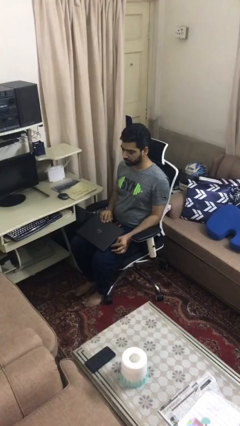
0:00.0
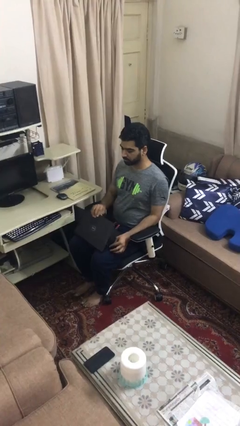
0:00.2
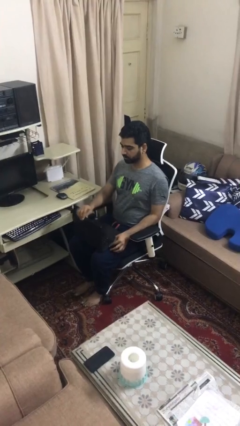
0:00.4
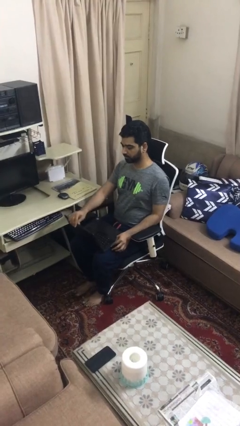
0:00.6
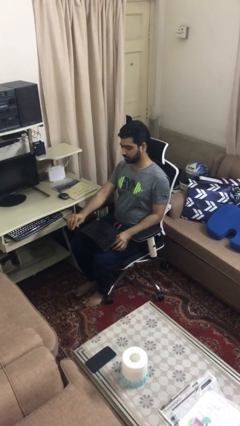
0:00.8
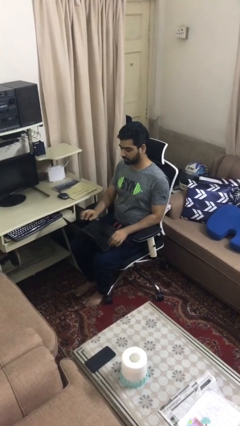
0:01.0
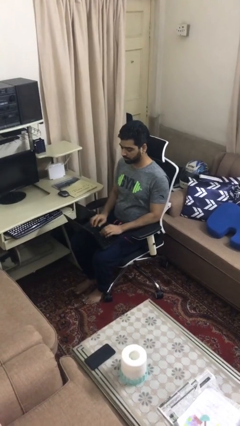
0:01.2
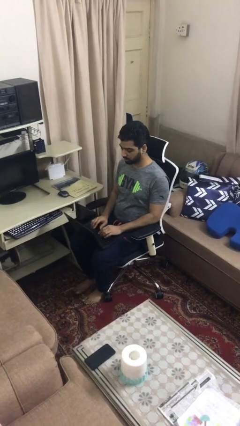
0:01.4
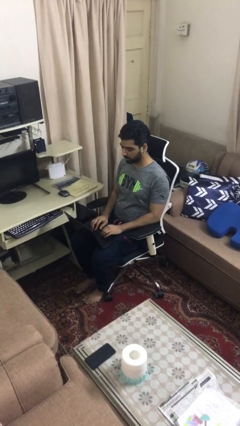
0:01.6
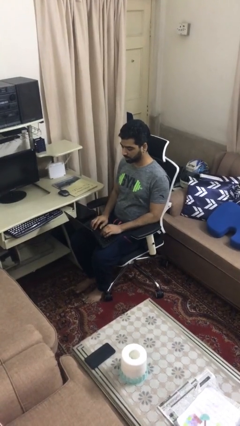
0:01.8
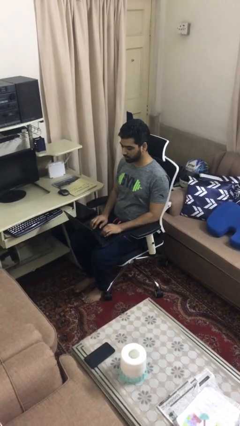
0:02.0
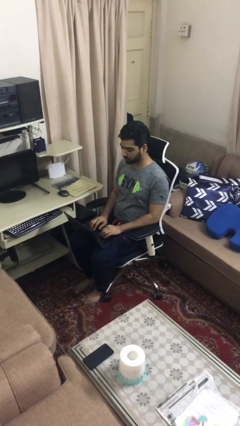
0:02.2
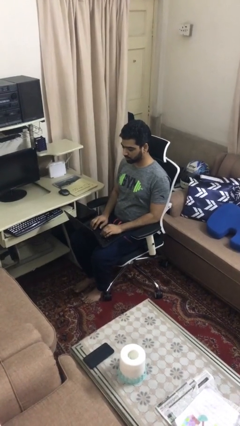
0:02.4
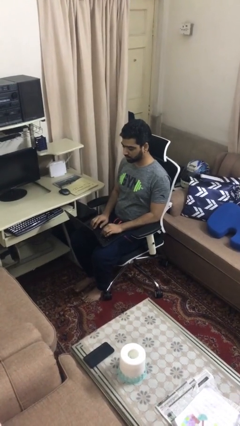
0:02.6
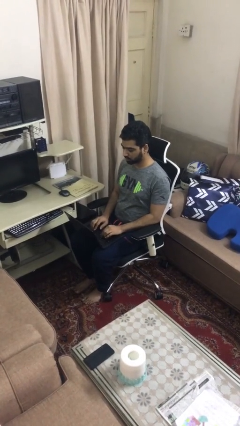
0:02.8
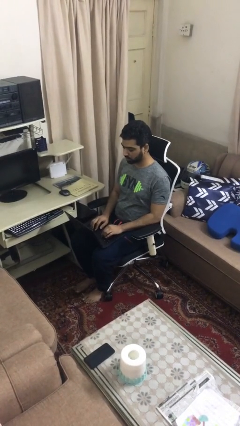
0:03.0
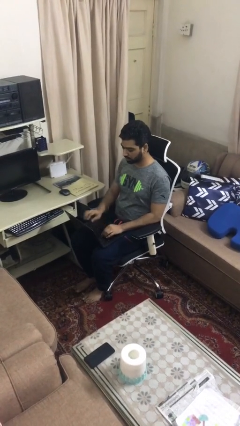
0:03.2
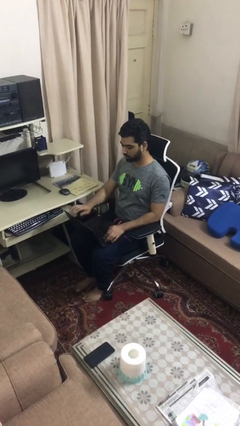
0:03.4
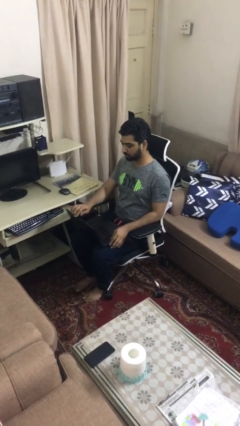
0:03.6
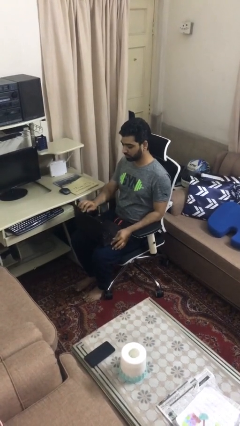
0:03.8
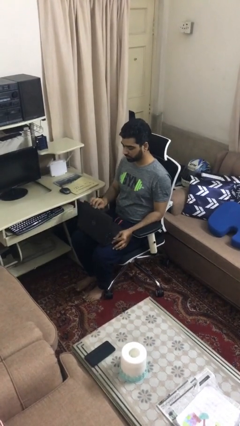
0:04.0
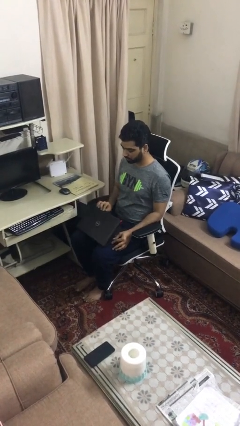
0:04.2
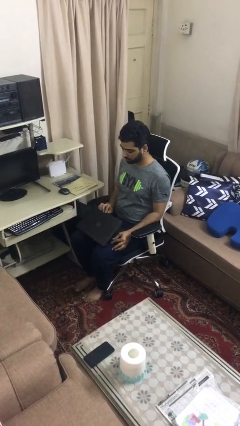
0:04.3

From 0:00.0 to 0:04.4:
person interacts with laptop

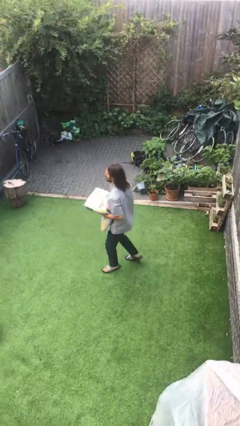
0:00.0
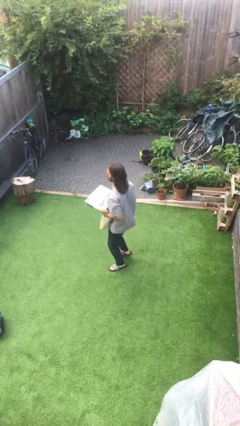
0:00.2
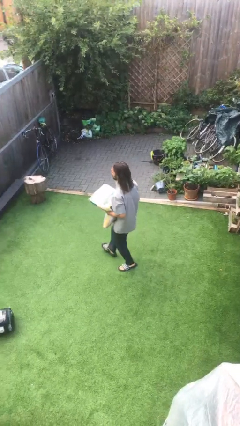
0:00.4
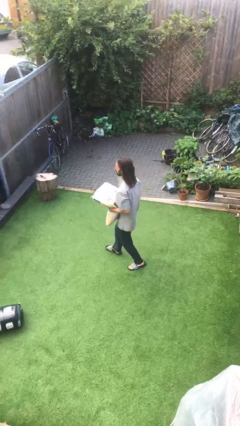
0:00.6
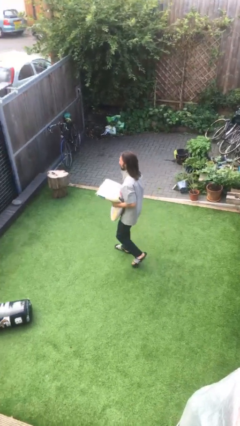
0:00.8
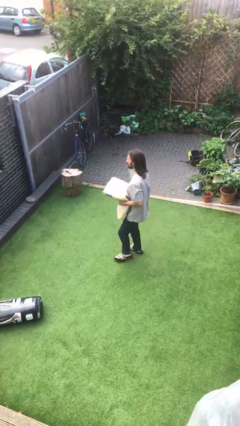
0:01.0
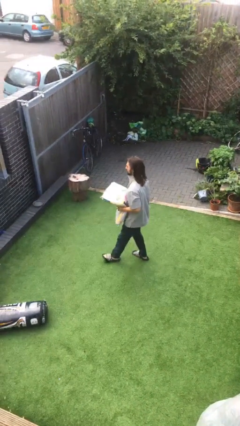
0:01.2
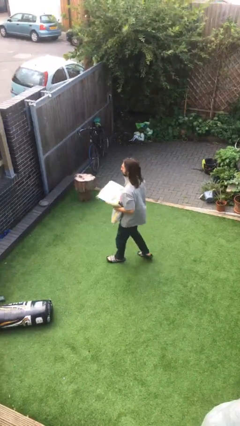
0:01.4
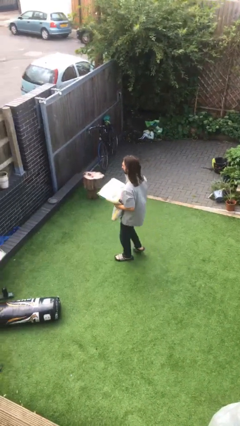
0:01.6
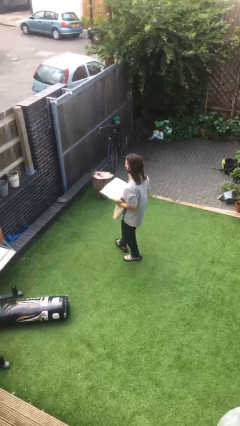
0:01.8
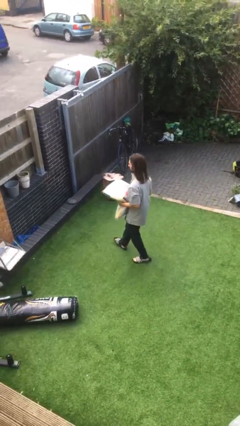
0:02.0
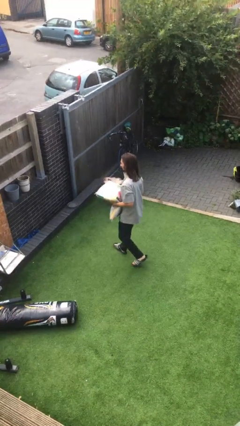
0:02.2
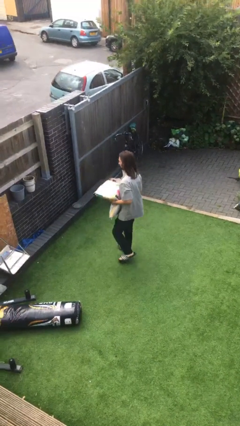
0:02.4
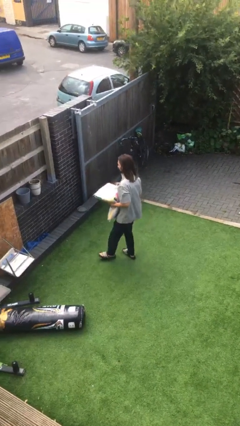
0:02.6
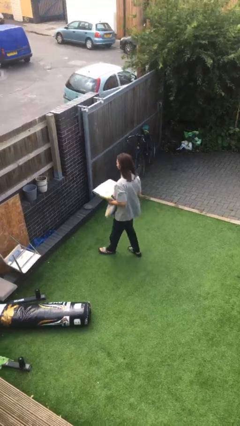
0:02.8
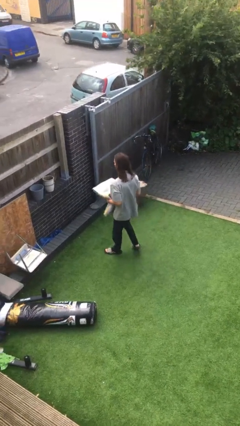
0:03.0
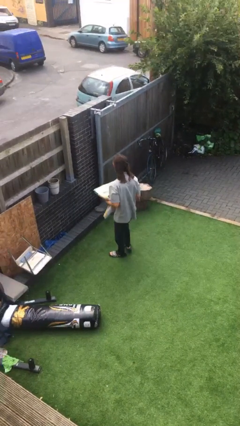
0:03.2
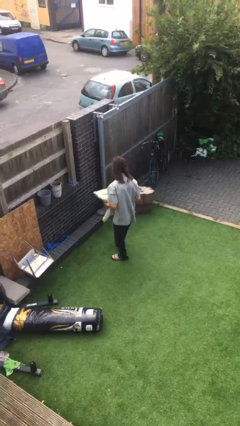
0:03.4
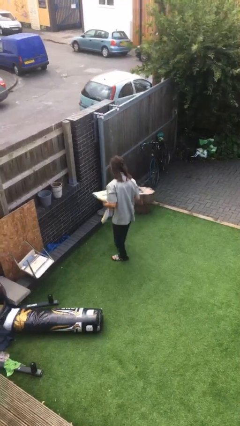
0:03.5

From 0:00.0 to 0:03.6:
person carries heavy object

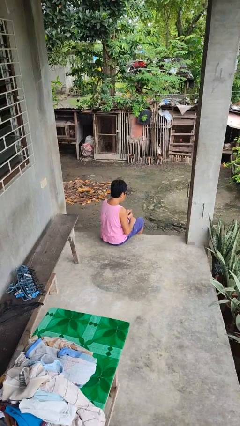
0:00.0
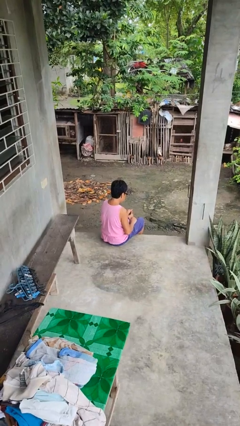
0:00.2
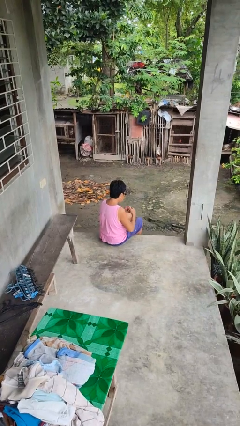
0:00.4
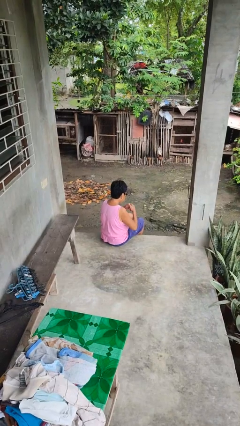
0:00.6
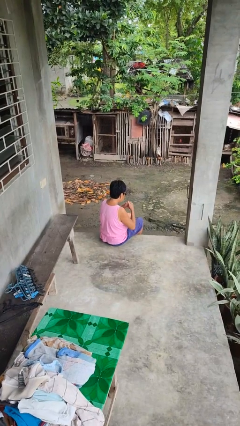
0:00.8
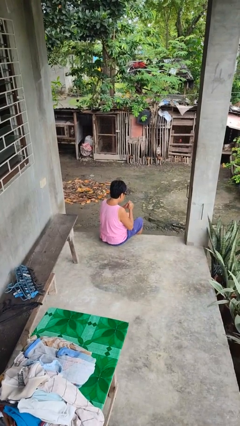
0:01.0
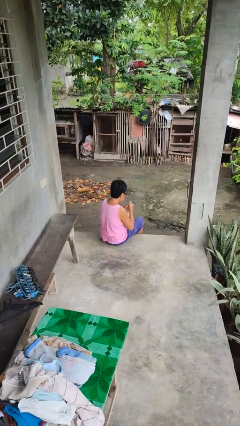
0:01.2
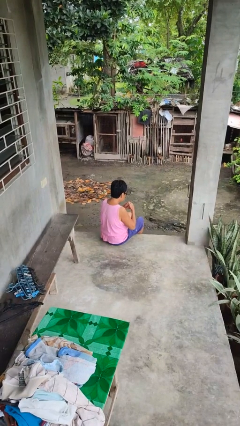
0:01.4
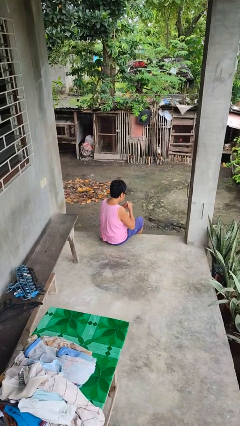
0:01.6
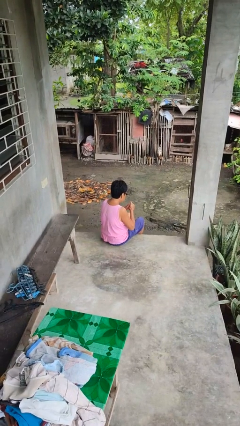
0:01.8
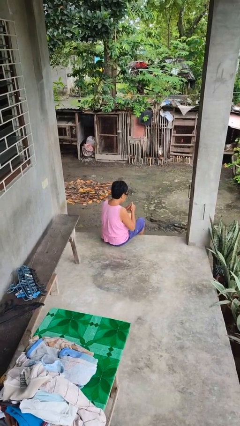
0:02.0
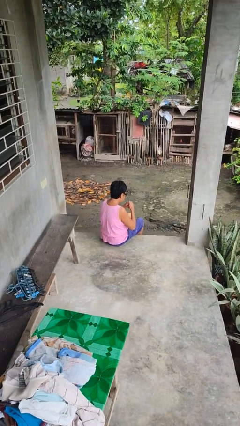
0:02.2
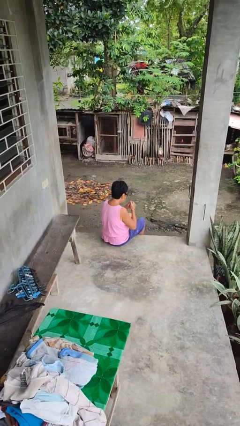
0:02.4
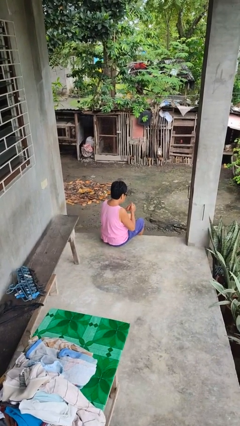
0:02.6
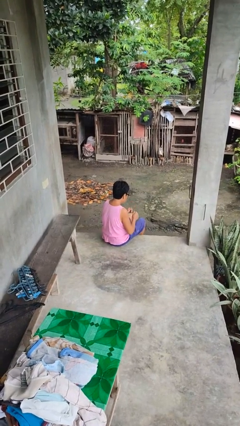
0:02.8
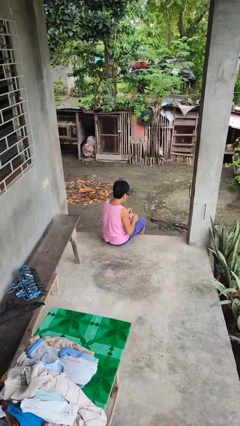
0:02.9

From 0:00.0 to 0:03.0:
person cracks knuckles

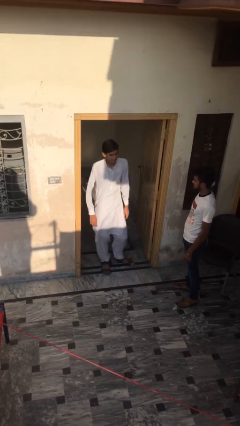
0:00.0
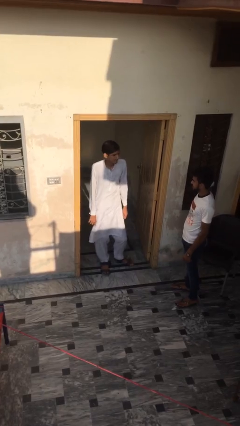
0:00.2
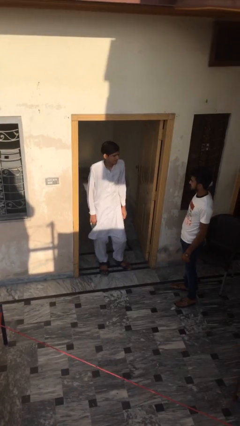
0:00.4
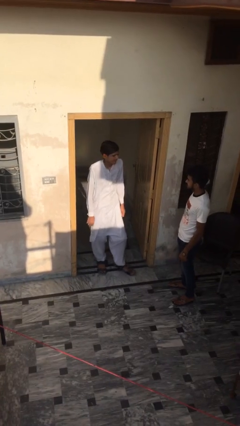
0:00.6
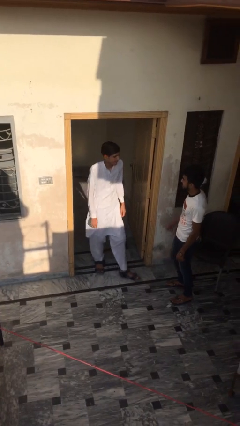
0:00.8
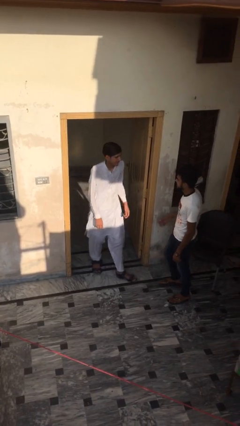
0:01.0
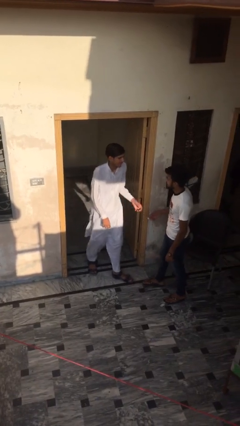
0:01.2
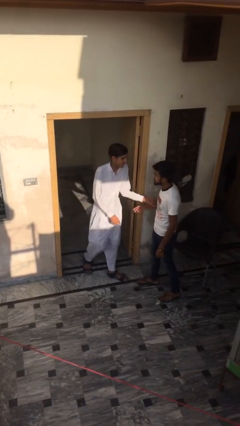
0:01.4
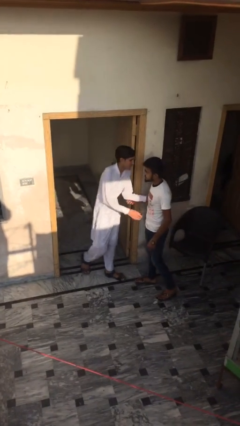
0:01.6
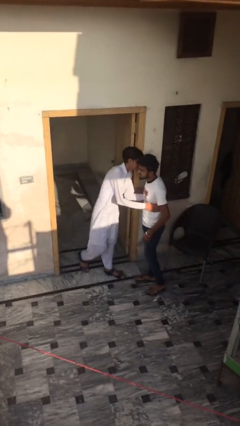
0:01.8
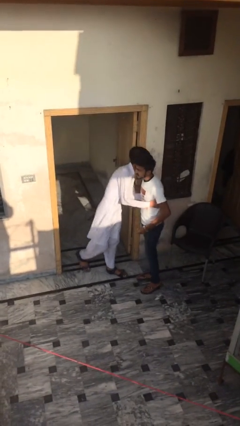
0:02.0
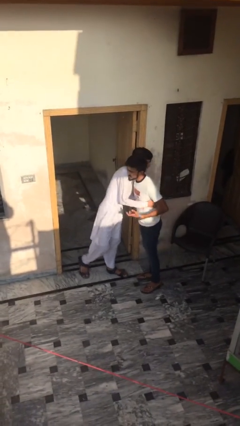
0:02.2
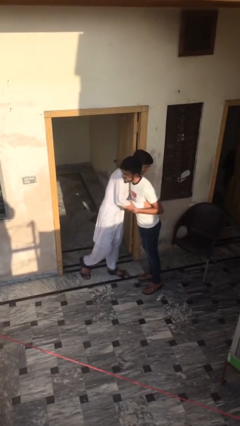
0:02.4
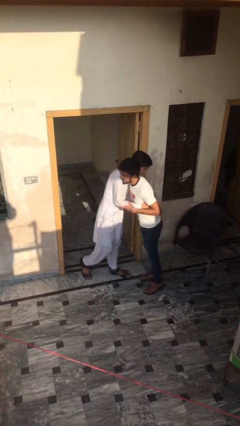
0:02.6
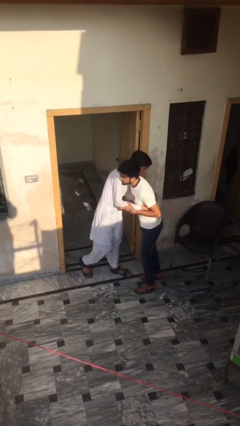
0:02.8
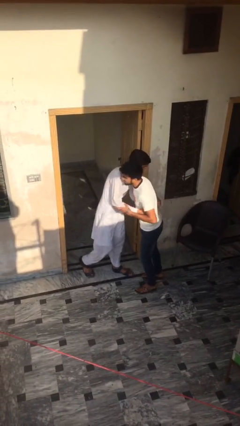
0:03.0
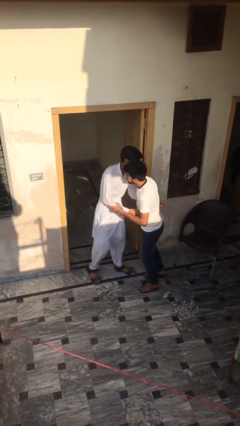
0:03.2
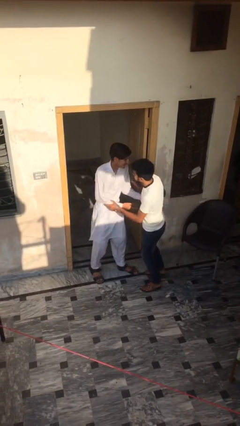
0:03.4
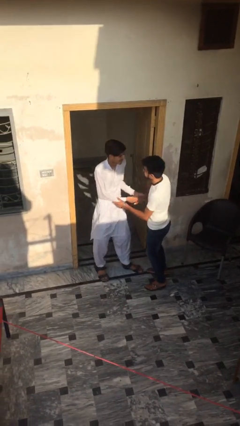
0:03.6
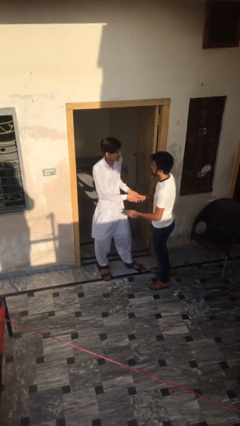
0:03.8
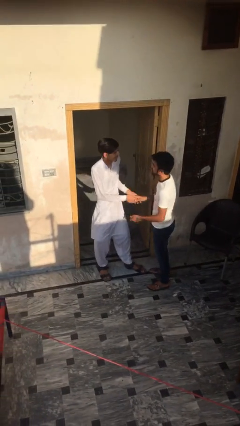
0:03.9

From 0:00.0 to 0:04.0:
person embraces person

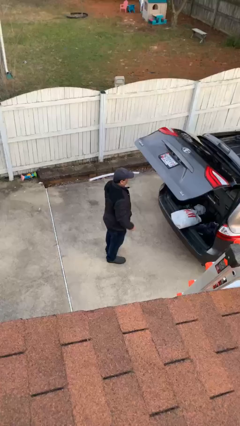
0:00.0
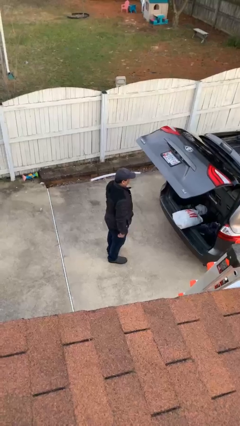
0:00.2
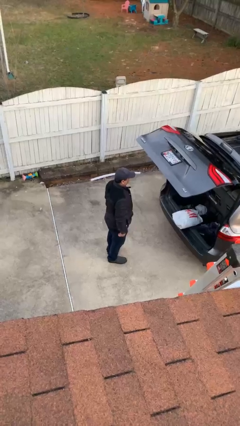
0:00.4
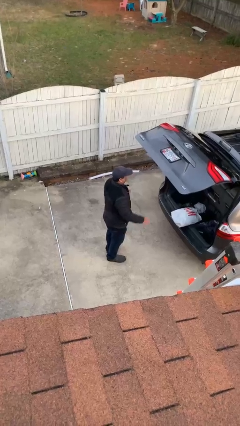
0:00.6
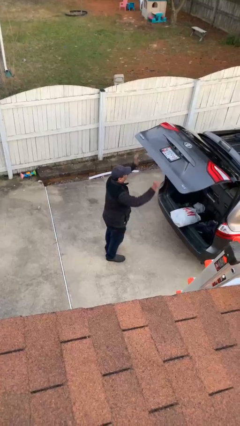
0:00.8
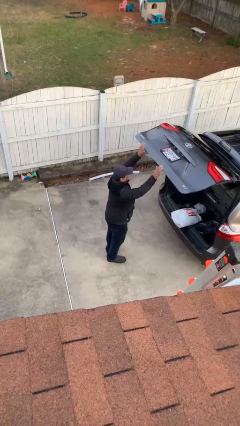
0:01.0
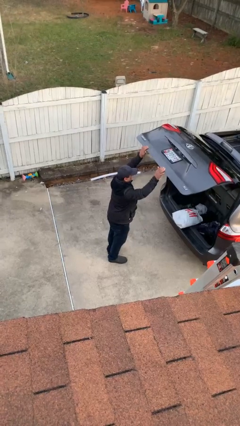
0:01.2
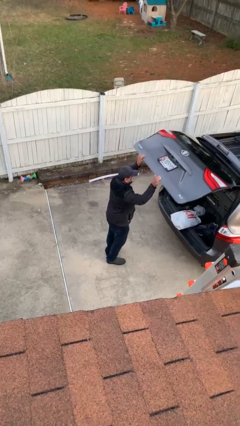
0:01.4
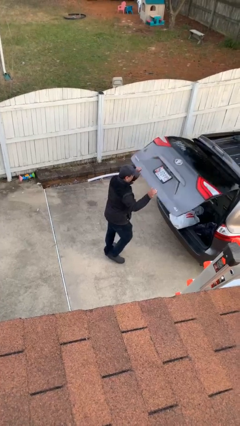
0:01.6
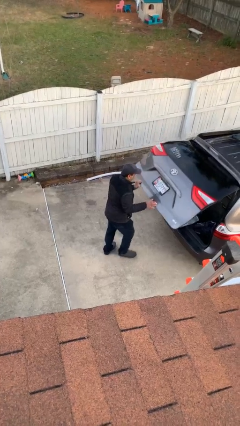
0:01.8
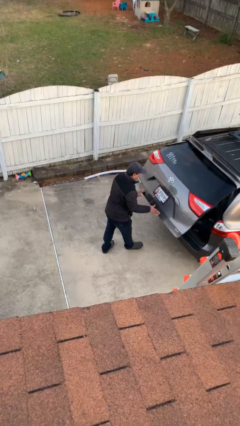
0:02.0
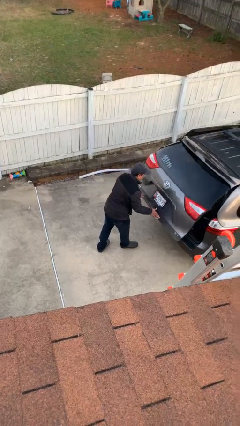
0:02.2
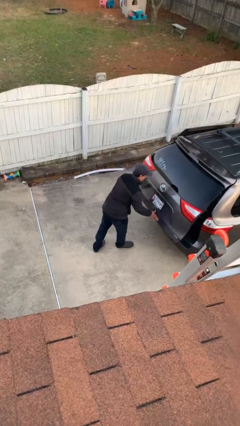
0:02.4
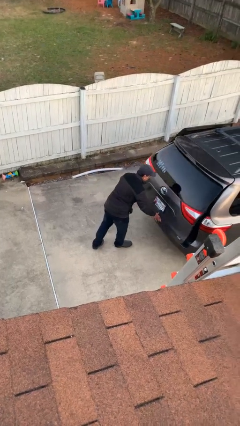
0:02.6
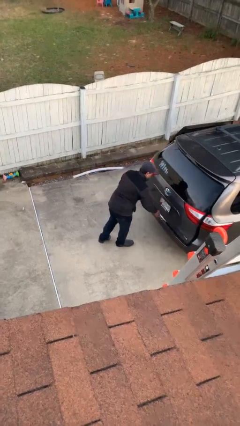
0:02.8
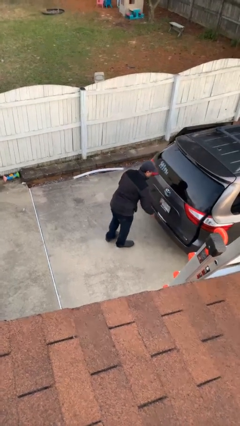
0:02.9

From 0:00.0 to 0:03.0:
person closes car trunk
